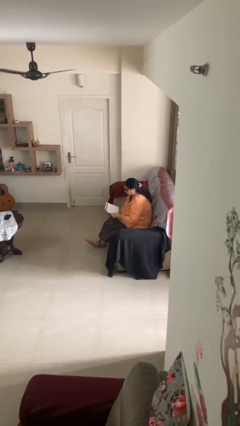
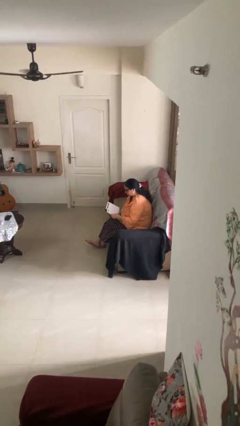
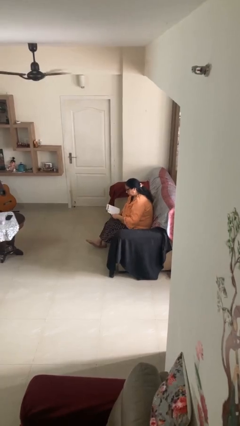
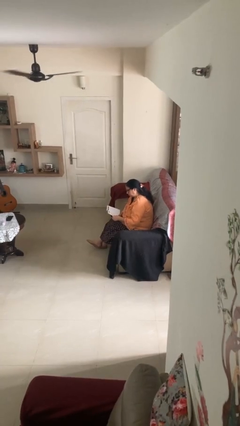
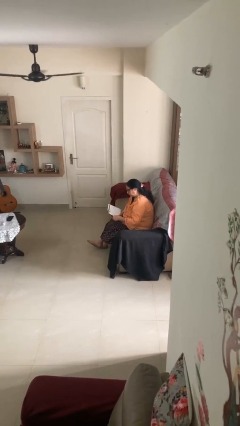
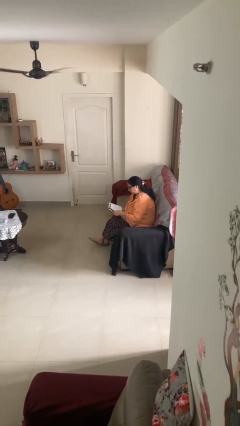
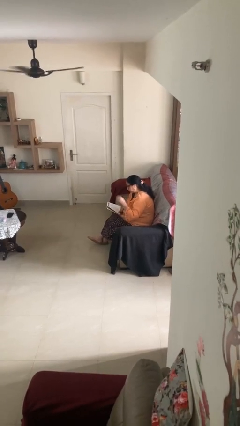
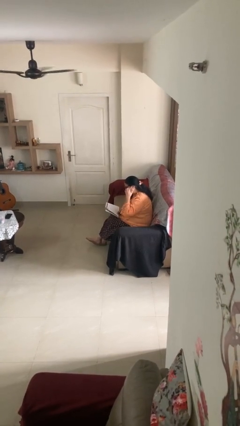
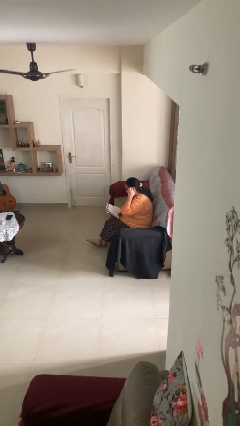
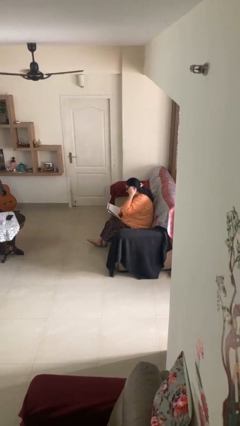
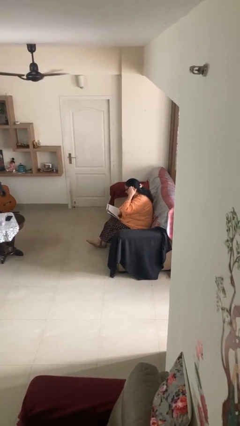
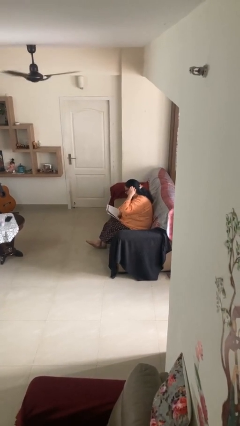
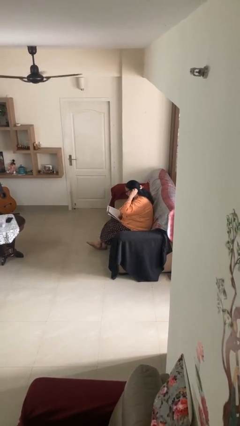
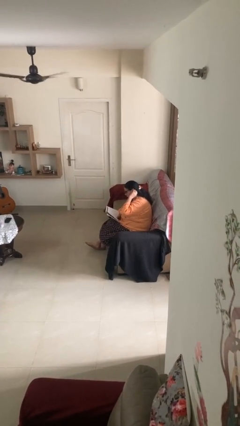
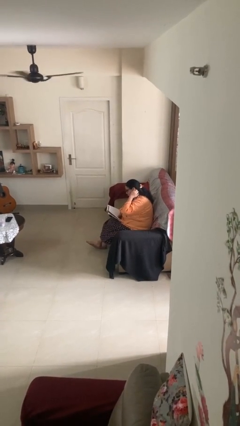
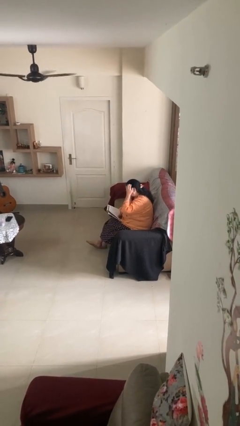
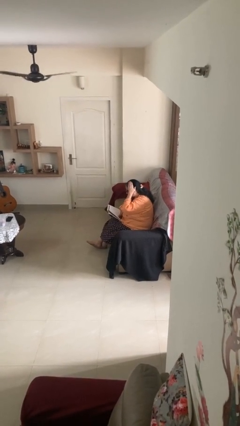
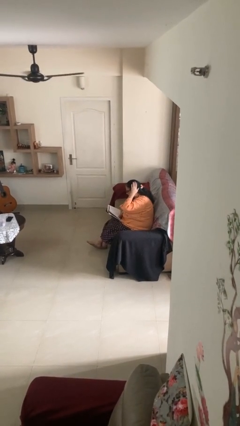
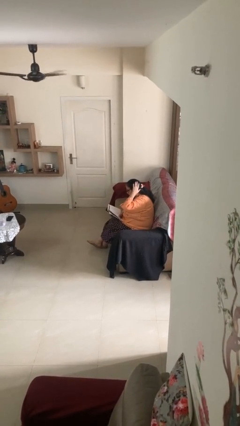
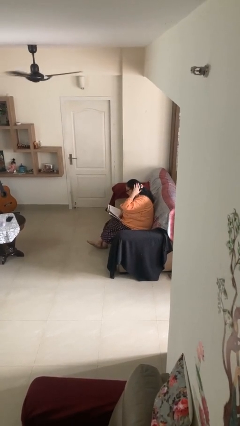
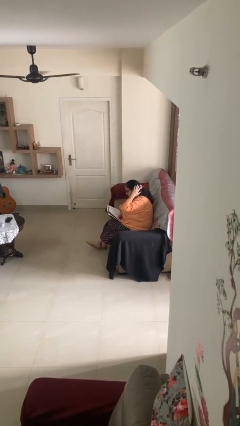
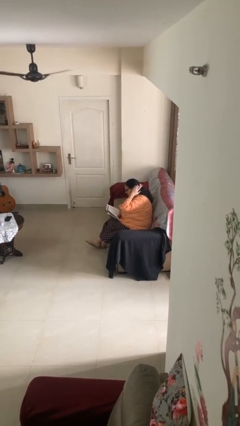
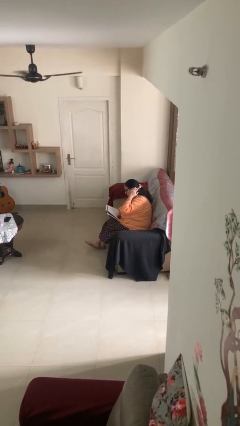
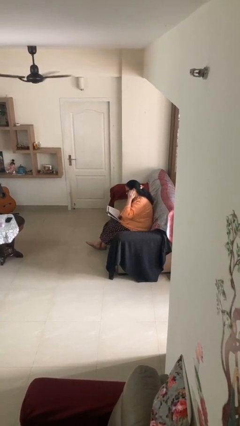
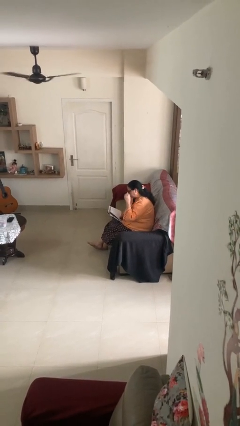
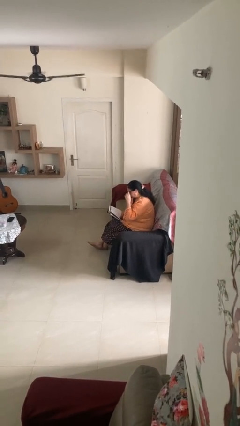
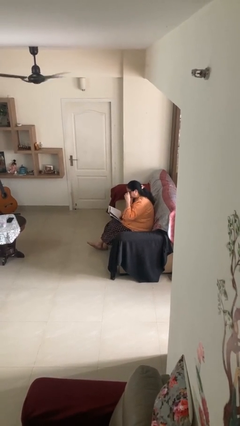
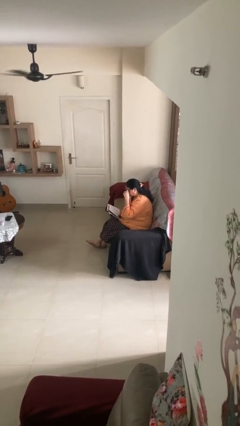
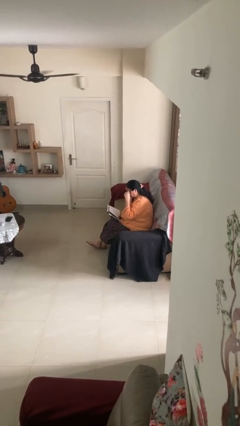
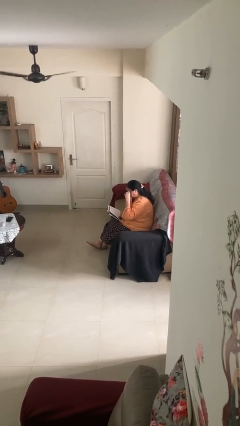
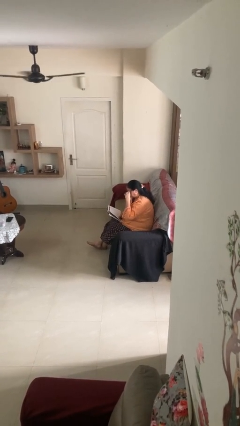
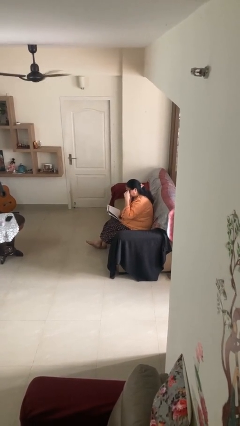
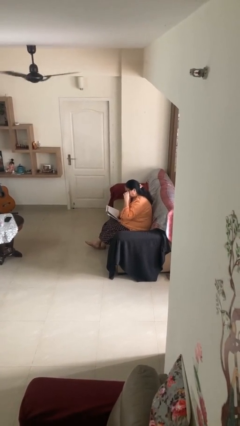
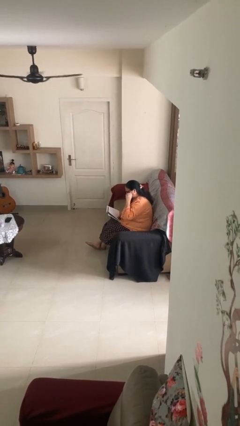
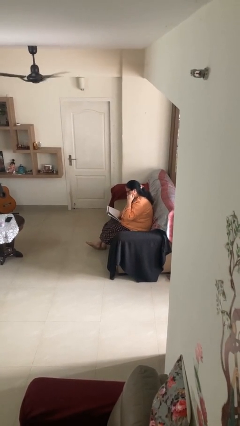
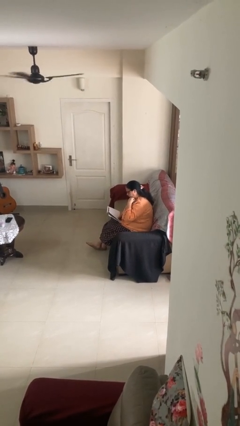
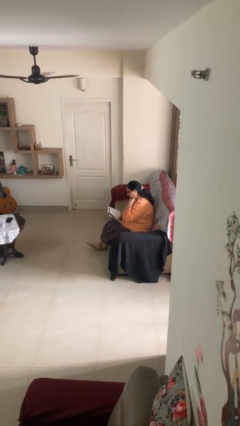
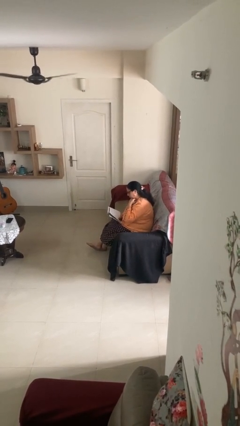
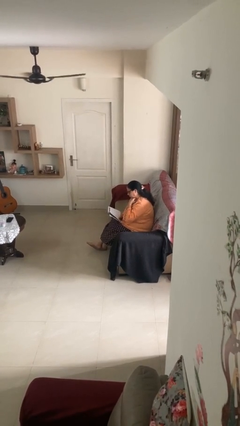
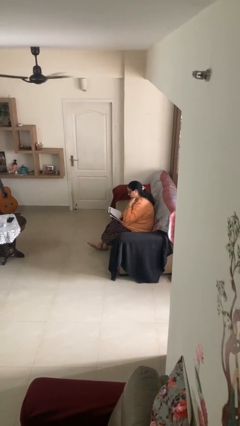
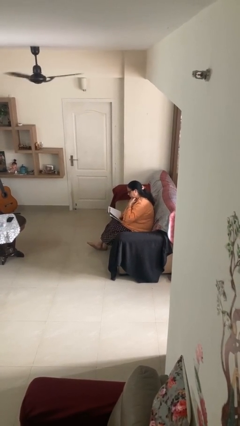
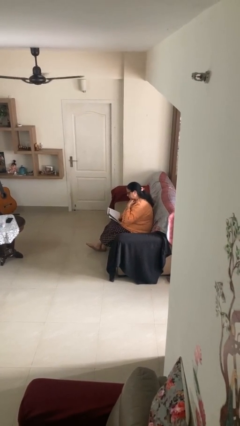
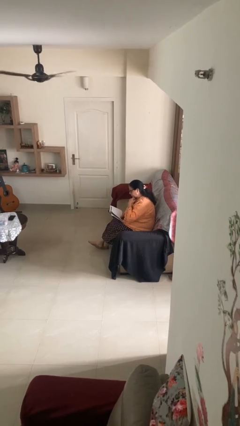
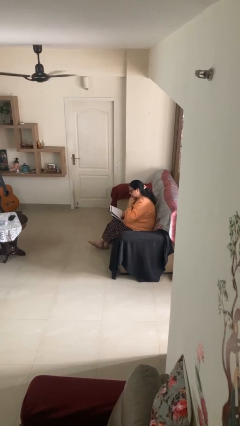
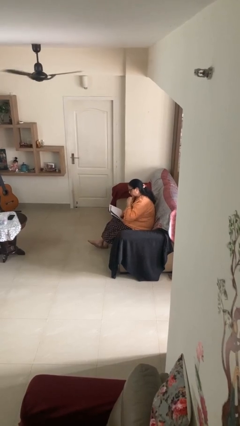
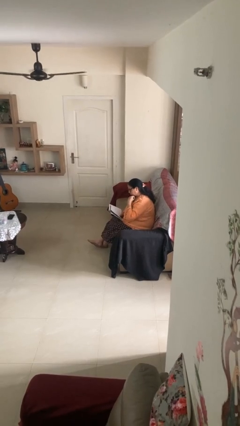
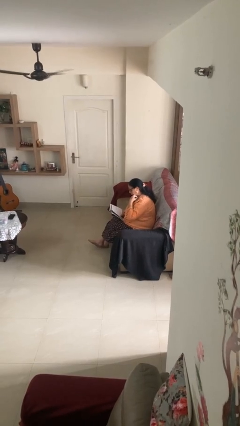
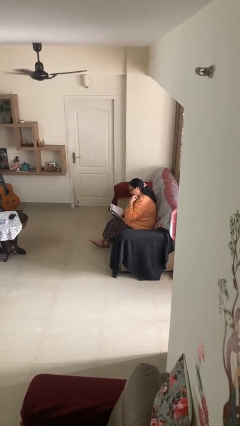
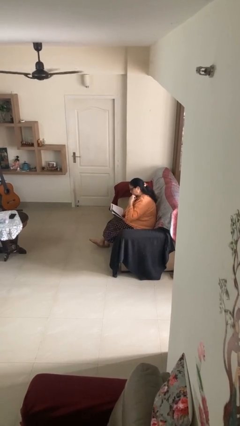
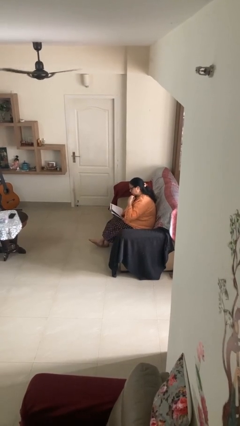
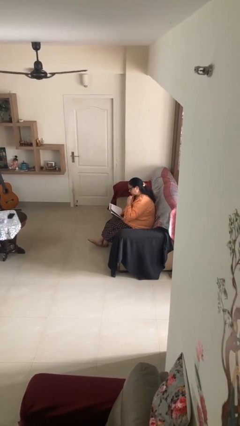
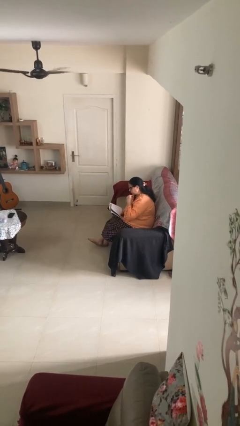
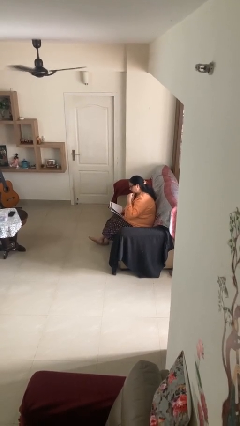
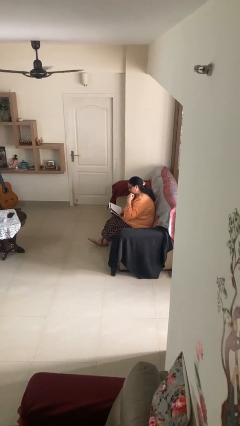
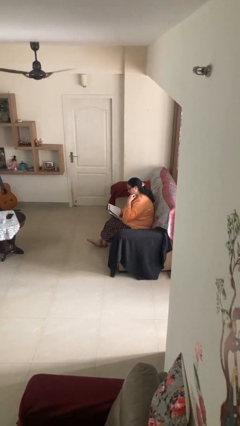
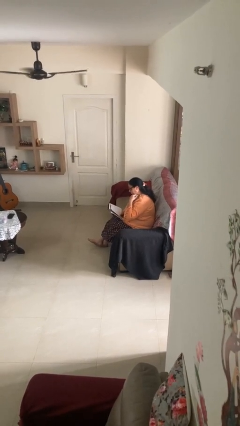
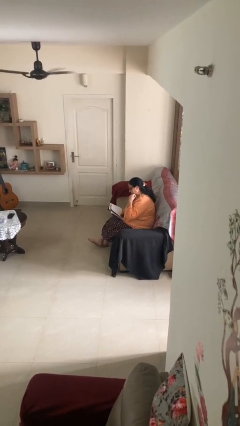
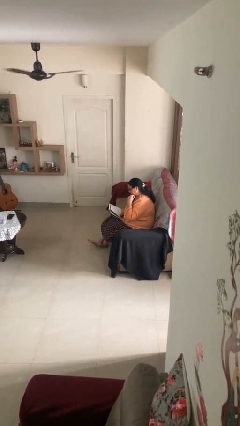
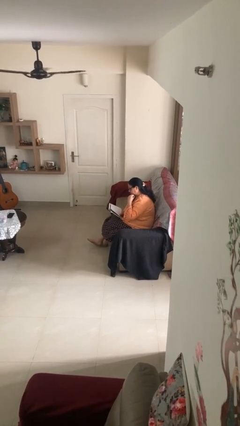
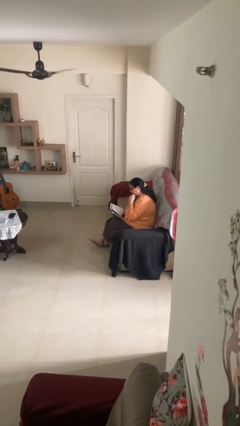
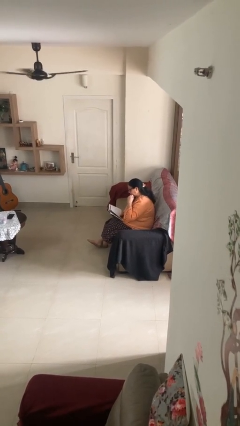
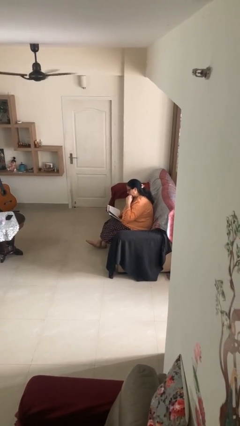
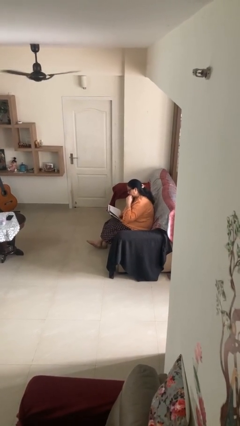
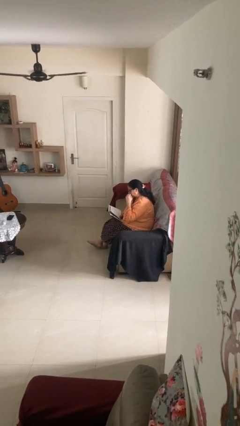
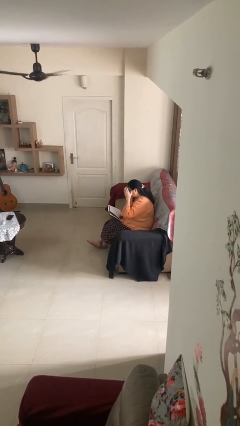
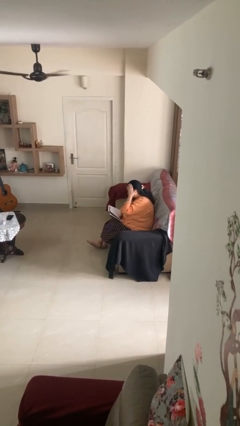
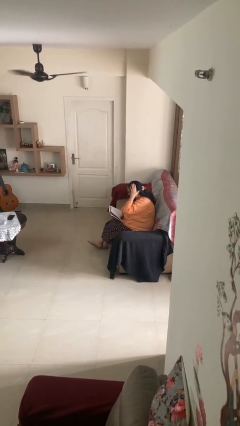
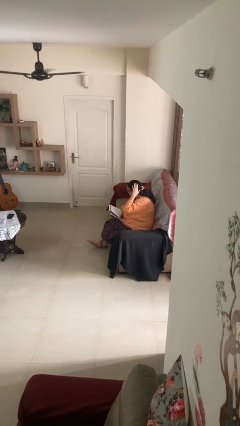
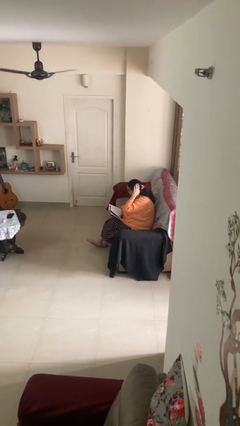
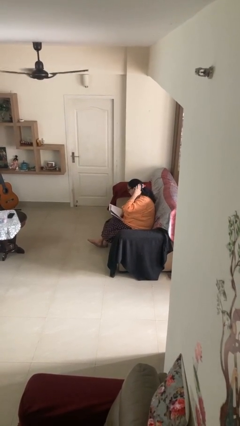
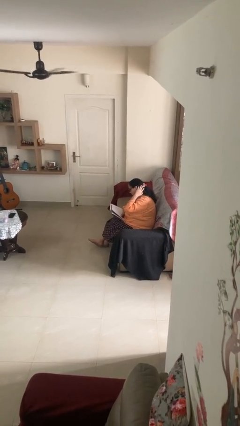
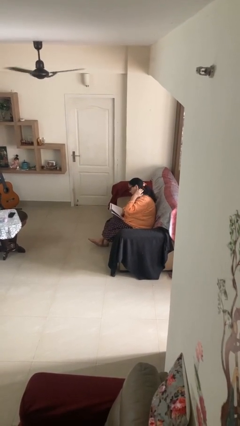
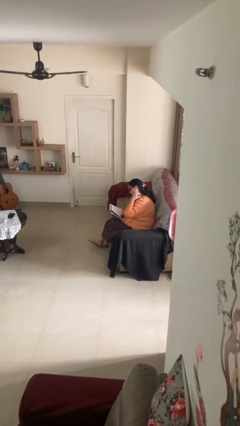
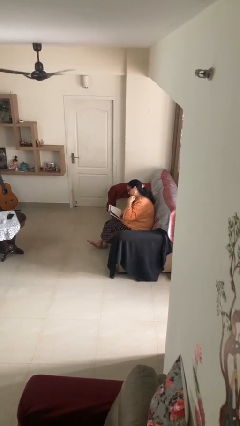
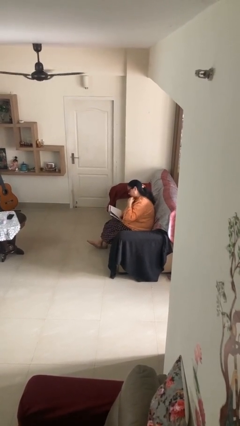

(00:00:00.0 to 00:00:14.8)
person reads document

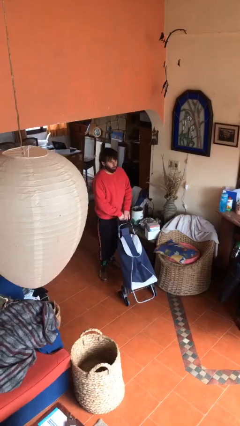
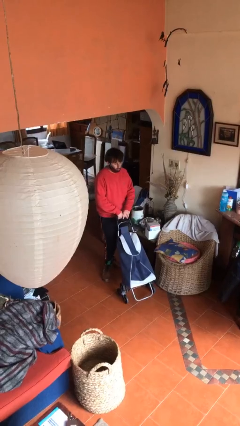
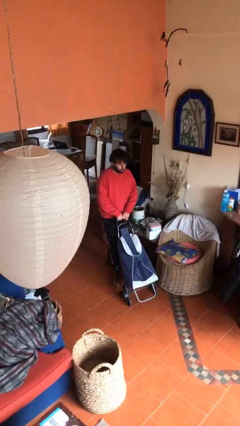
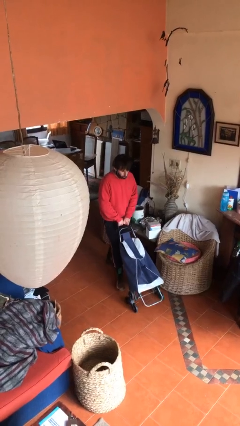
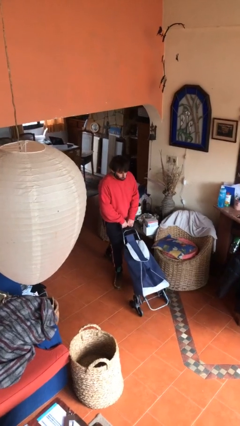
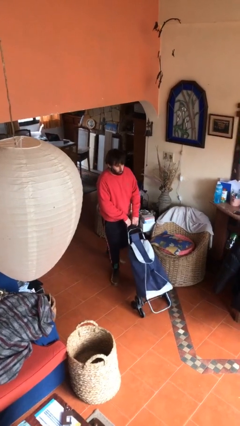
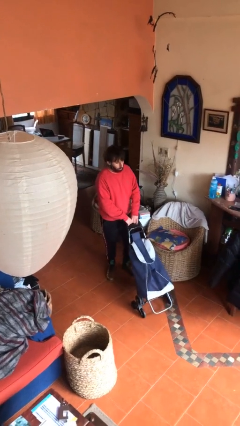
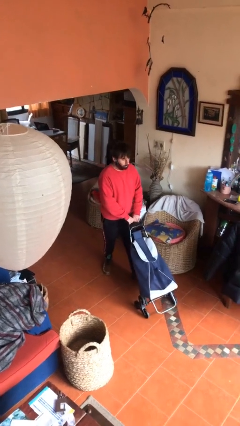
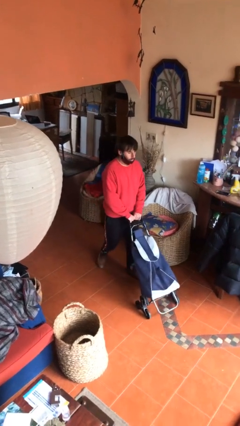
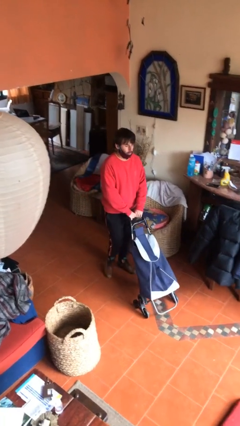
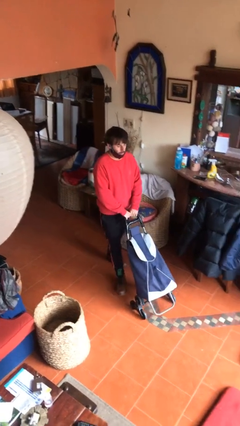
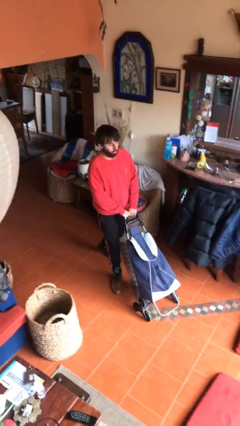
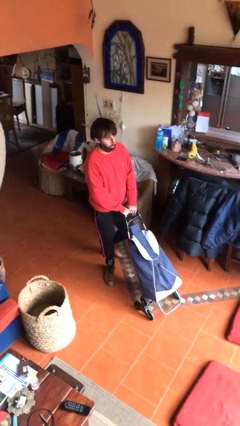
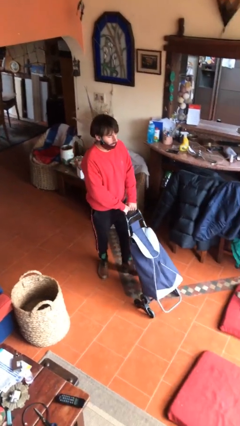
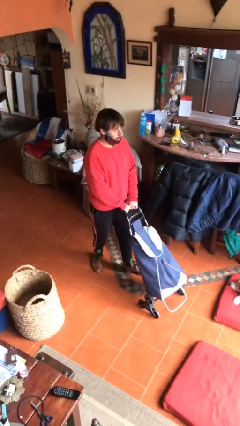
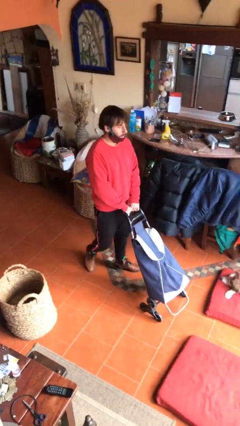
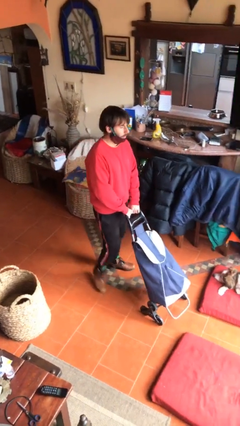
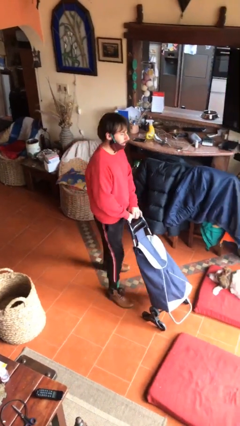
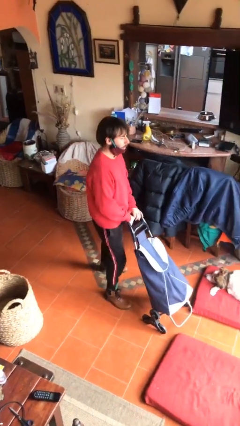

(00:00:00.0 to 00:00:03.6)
person pushes wheeled cart
